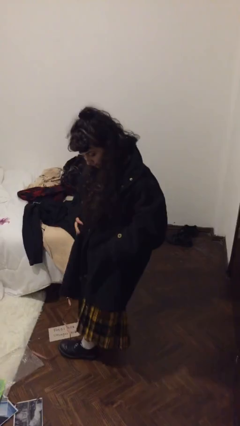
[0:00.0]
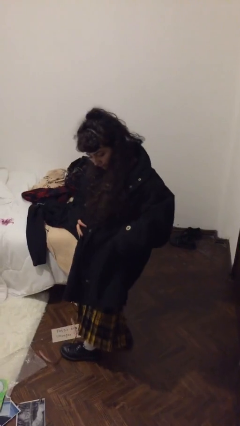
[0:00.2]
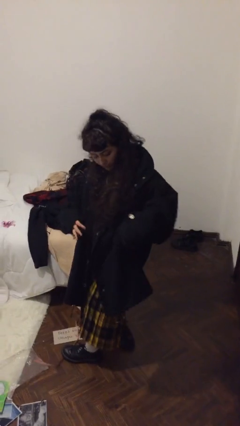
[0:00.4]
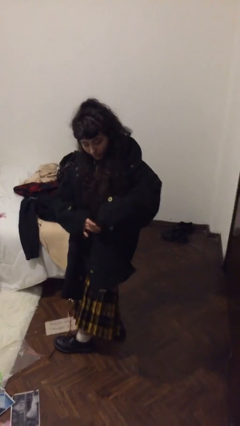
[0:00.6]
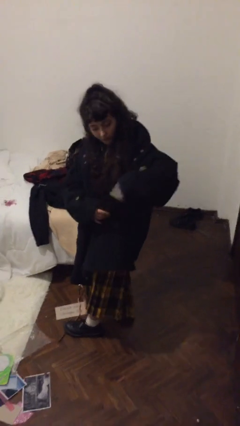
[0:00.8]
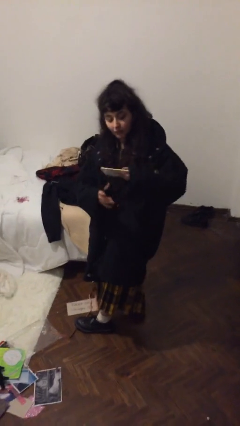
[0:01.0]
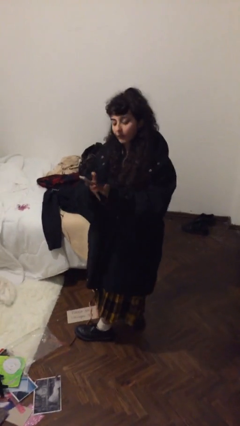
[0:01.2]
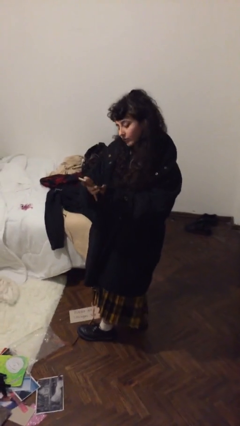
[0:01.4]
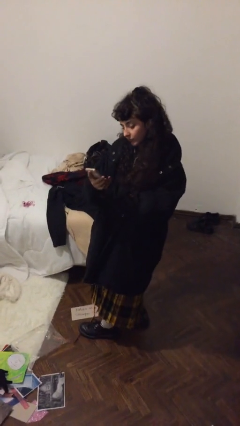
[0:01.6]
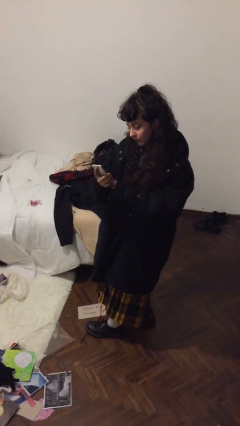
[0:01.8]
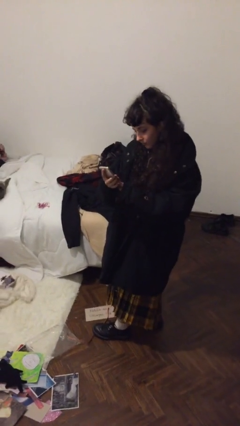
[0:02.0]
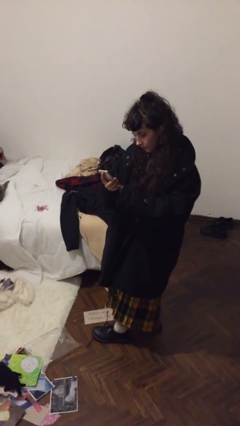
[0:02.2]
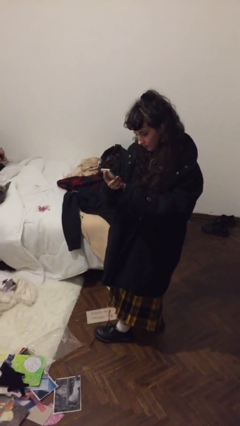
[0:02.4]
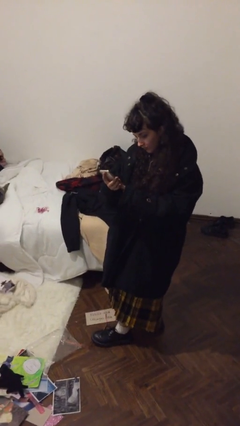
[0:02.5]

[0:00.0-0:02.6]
person takes phone from pocket

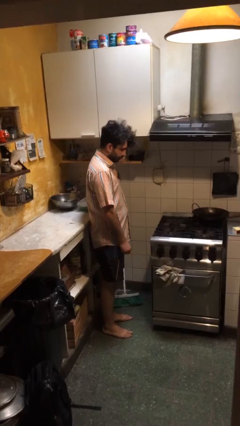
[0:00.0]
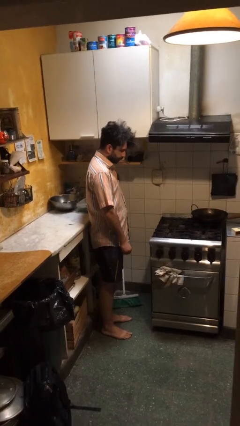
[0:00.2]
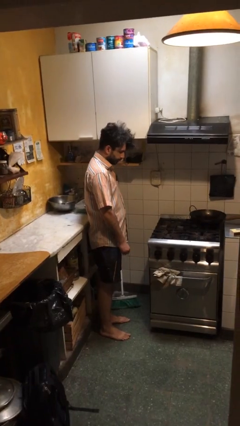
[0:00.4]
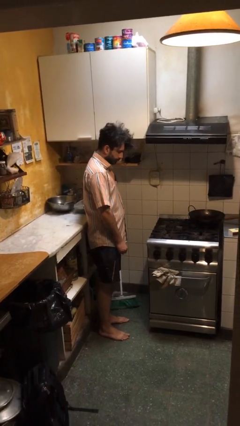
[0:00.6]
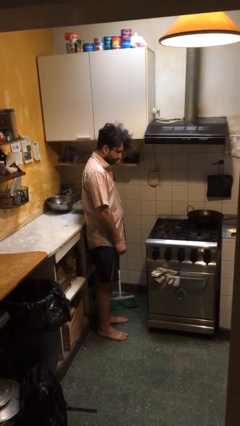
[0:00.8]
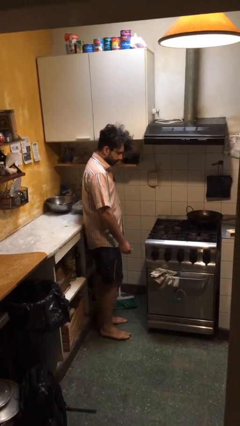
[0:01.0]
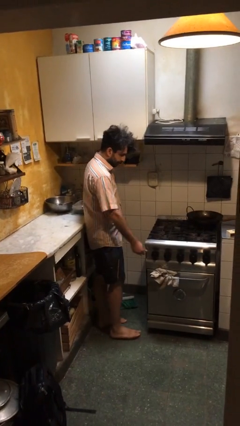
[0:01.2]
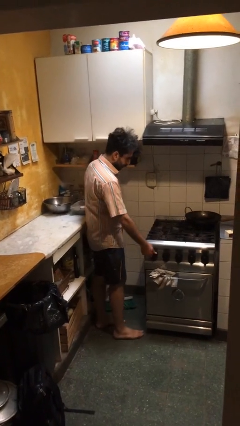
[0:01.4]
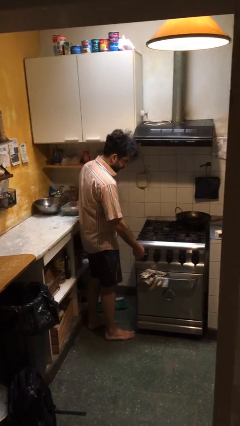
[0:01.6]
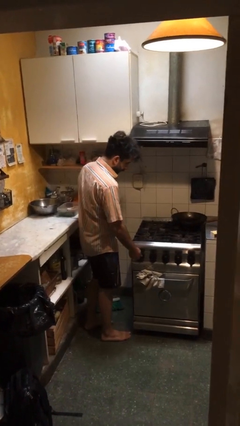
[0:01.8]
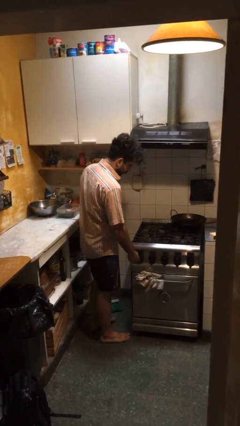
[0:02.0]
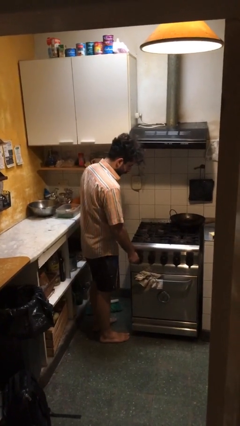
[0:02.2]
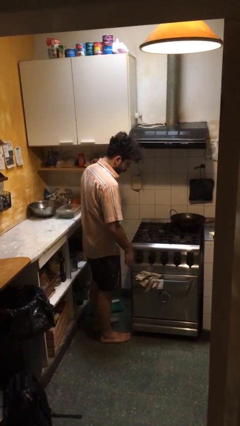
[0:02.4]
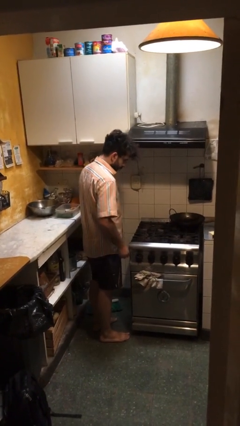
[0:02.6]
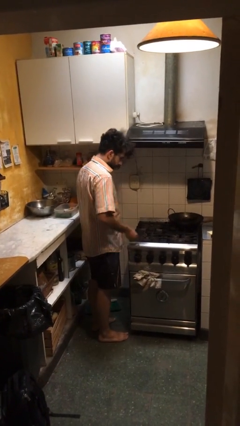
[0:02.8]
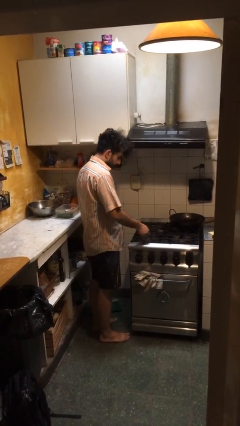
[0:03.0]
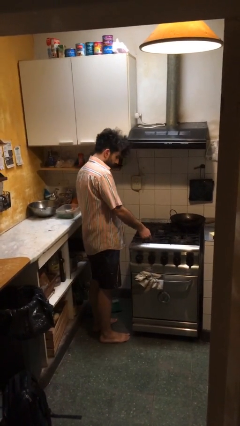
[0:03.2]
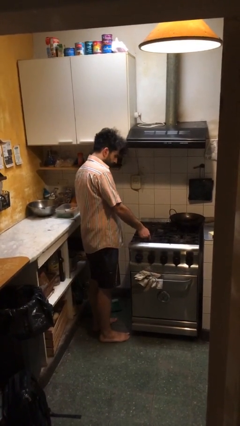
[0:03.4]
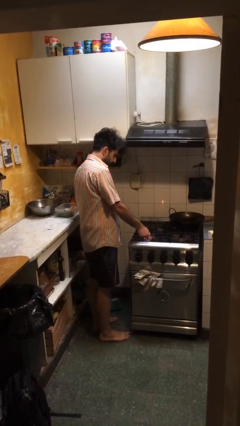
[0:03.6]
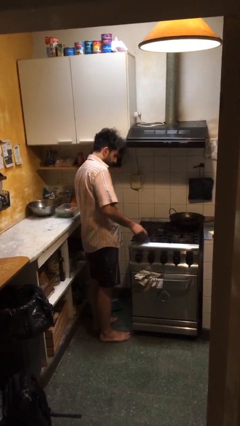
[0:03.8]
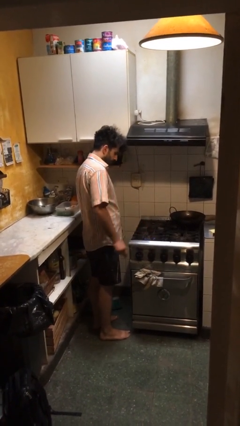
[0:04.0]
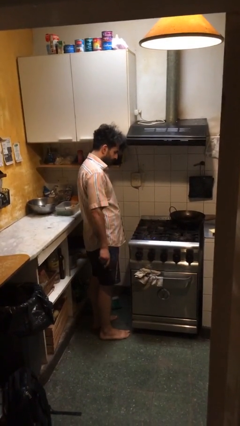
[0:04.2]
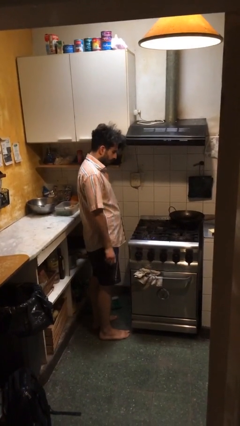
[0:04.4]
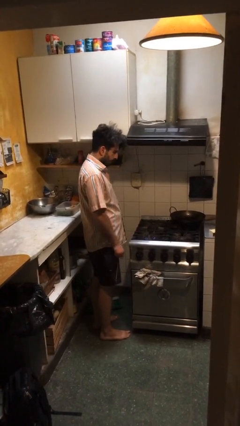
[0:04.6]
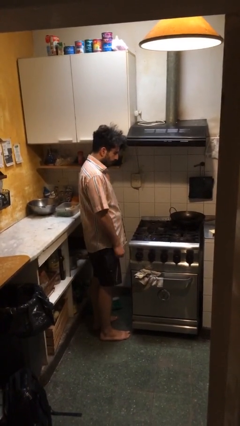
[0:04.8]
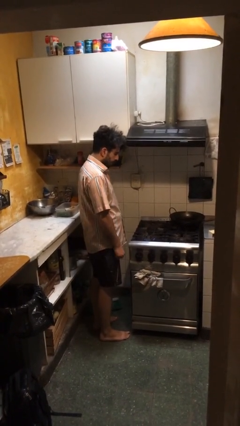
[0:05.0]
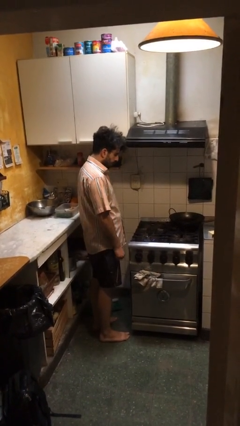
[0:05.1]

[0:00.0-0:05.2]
person turns on stovetop

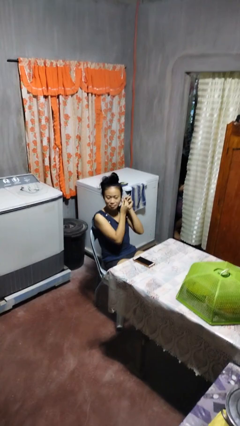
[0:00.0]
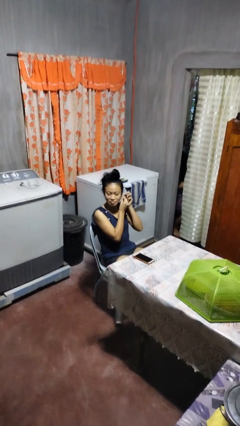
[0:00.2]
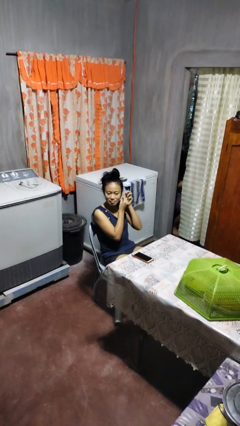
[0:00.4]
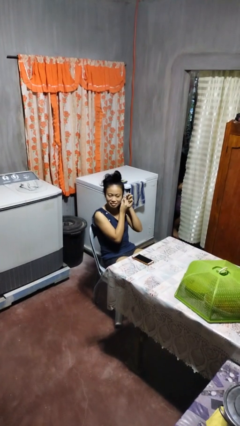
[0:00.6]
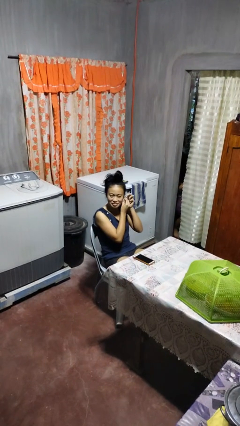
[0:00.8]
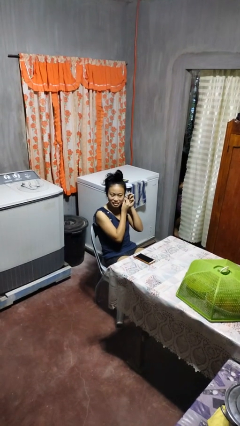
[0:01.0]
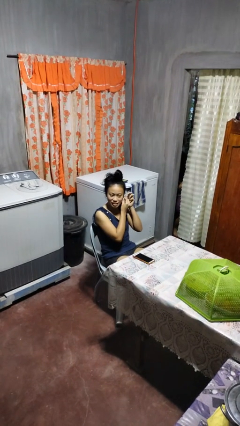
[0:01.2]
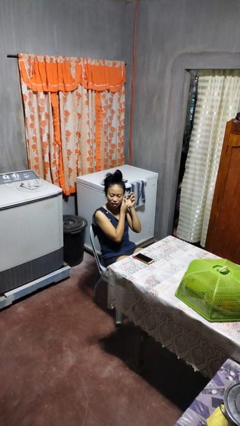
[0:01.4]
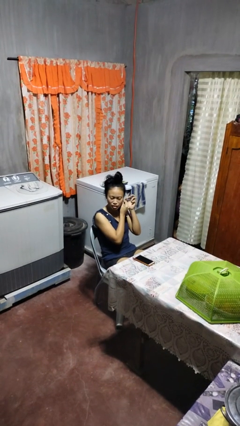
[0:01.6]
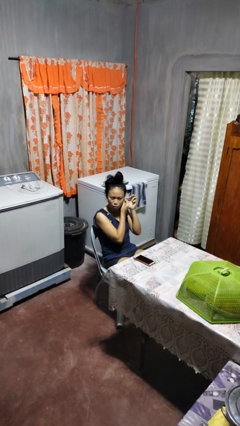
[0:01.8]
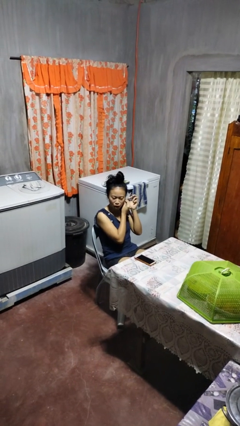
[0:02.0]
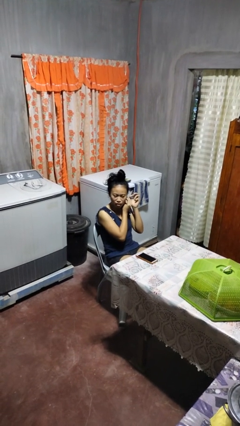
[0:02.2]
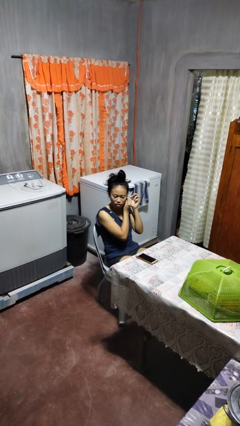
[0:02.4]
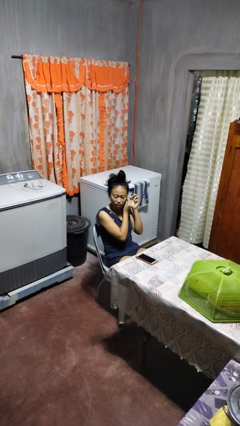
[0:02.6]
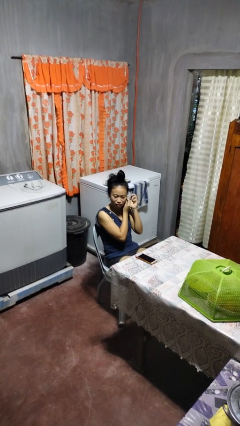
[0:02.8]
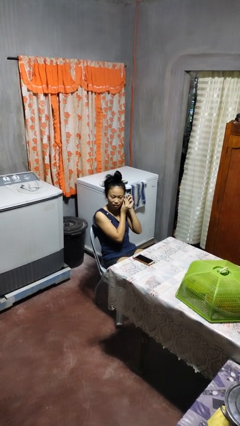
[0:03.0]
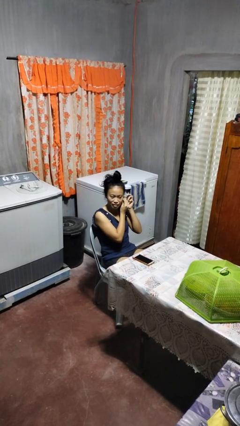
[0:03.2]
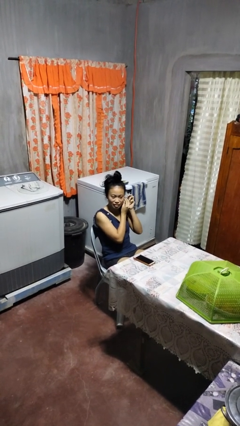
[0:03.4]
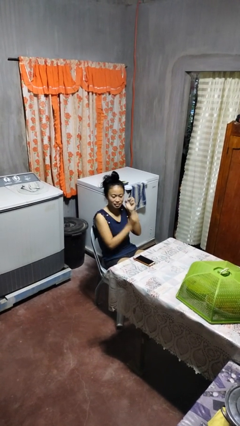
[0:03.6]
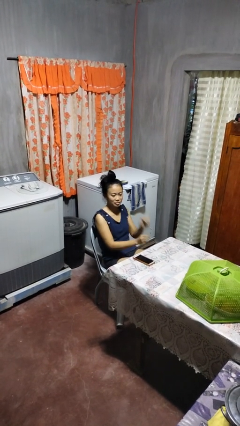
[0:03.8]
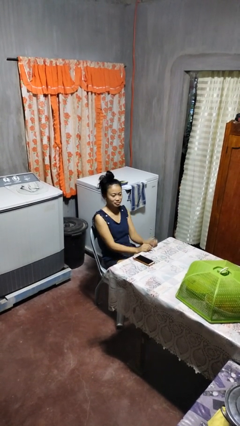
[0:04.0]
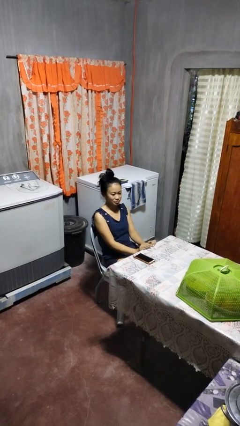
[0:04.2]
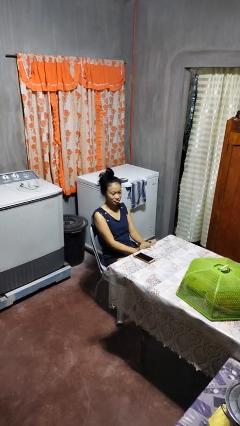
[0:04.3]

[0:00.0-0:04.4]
person puts on earrings

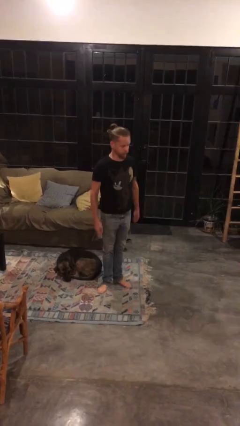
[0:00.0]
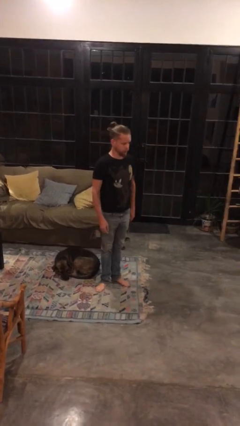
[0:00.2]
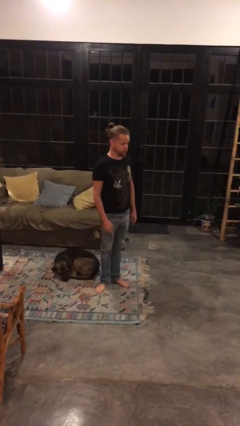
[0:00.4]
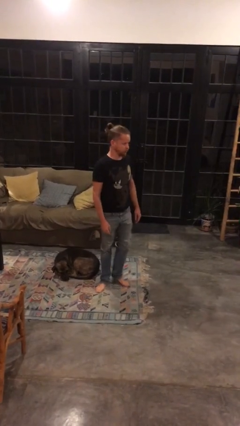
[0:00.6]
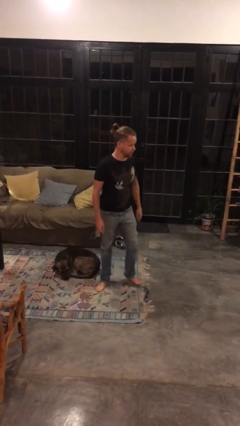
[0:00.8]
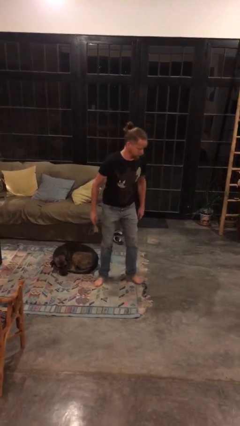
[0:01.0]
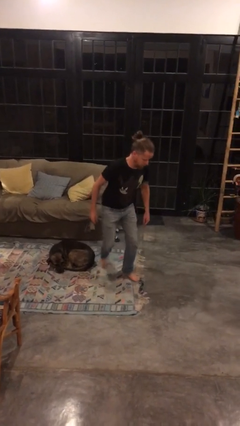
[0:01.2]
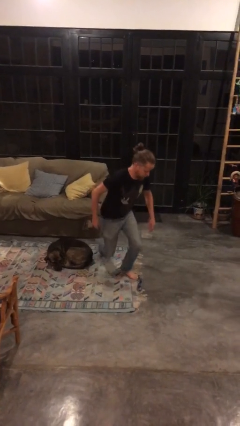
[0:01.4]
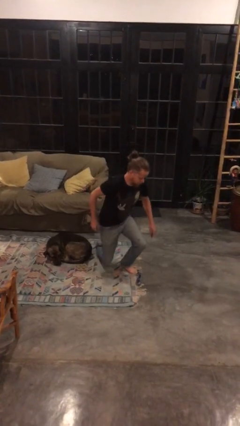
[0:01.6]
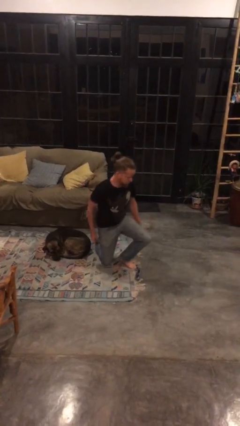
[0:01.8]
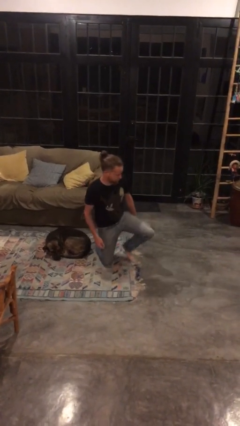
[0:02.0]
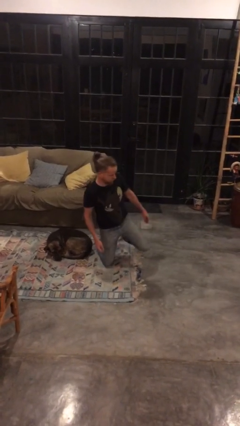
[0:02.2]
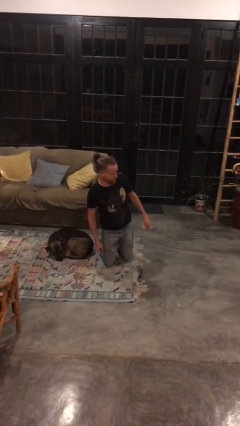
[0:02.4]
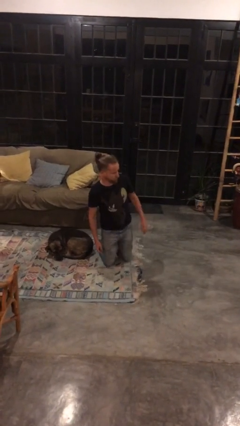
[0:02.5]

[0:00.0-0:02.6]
person kneels

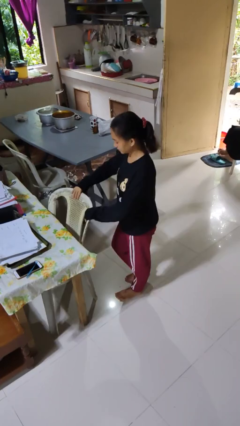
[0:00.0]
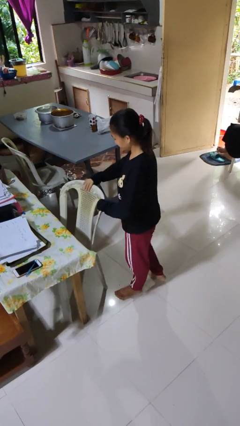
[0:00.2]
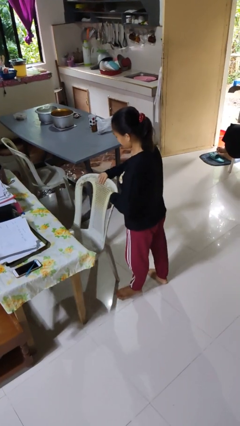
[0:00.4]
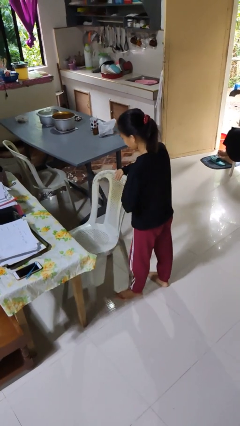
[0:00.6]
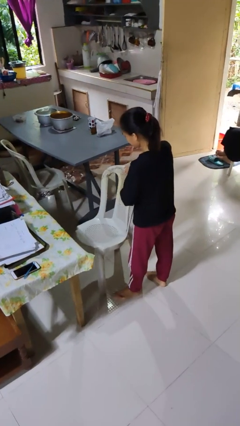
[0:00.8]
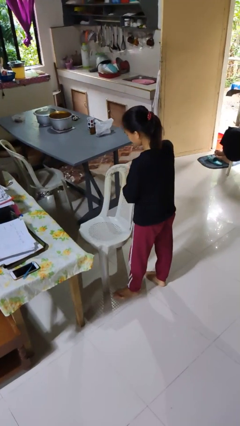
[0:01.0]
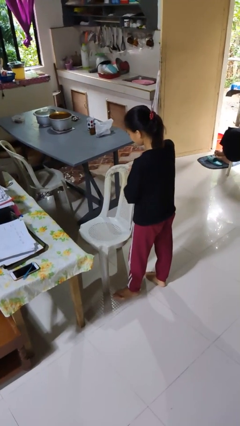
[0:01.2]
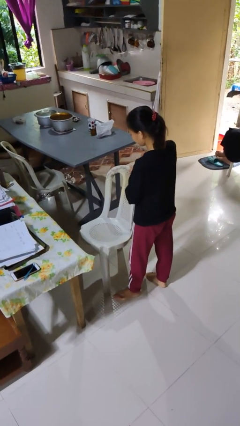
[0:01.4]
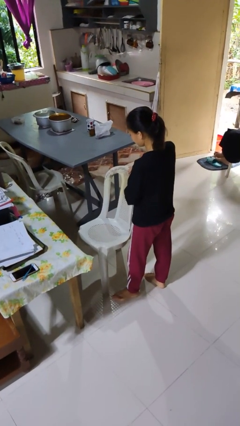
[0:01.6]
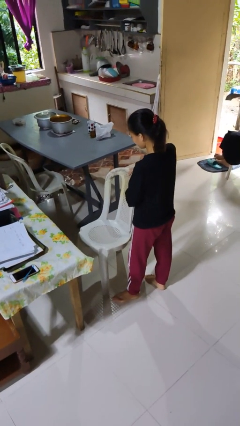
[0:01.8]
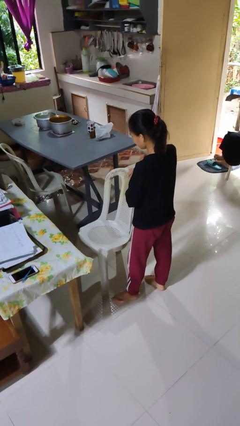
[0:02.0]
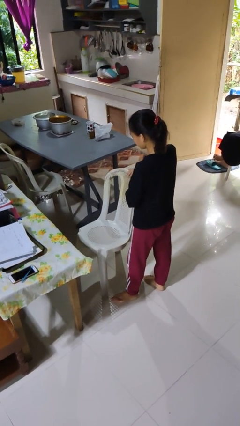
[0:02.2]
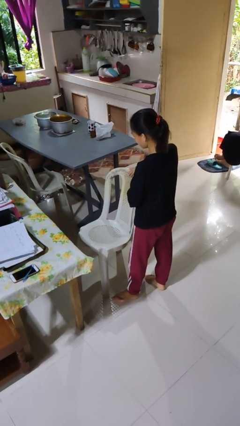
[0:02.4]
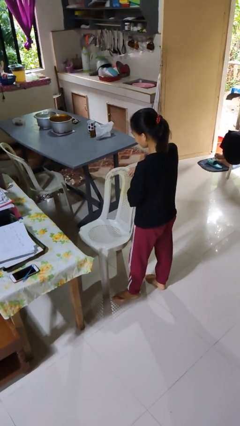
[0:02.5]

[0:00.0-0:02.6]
person pulls out chair

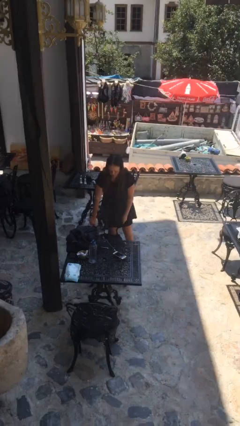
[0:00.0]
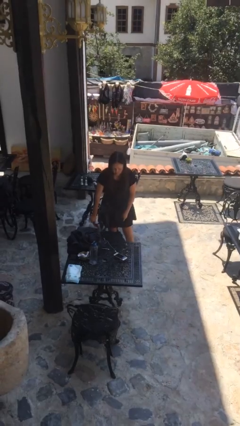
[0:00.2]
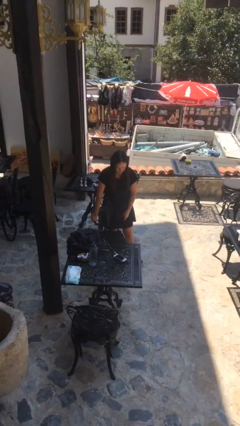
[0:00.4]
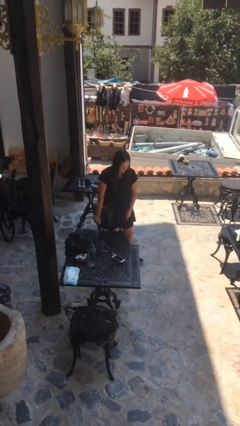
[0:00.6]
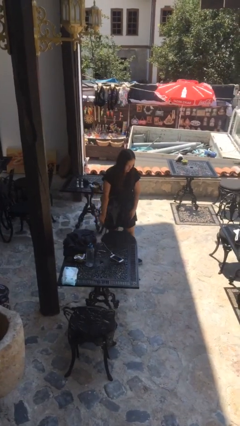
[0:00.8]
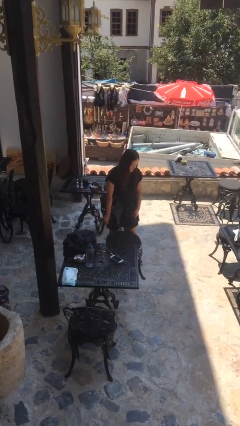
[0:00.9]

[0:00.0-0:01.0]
person picks up object from floor
